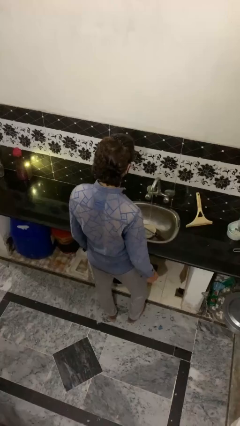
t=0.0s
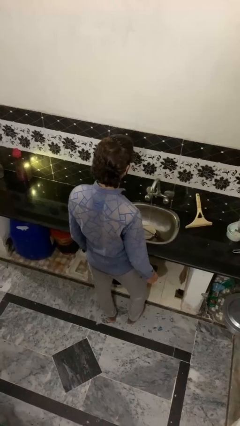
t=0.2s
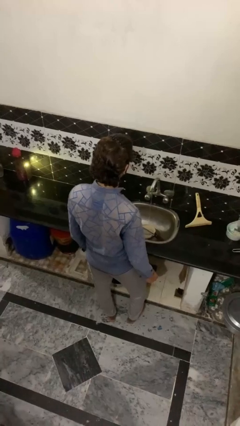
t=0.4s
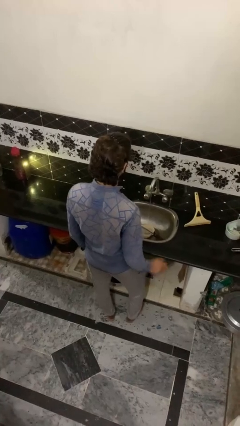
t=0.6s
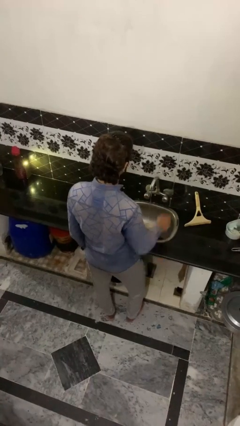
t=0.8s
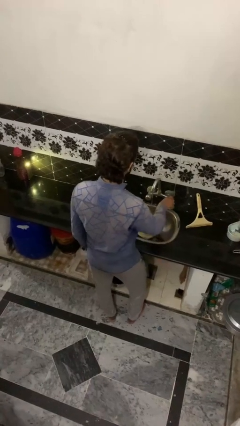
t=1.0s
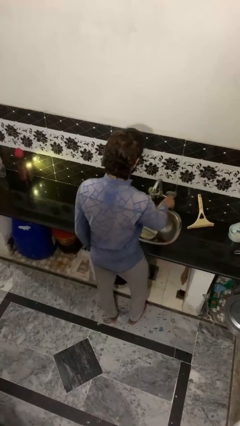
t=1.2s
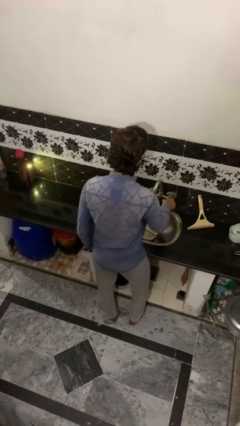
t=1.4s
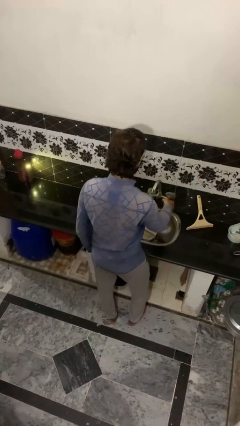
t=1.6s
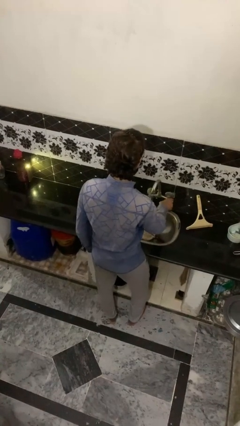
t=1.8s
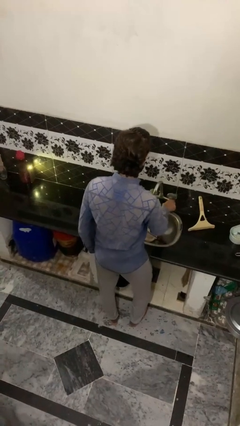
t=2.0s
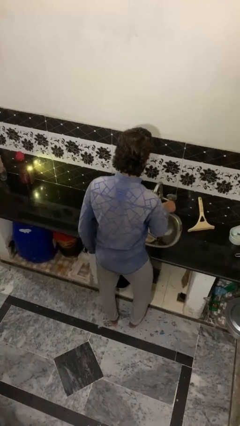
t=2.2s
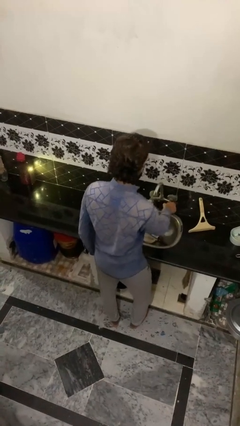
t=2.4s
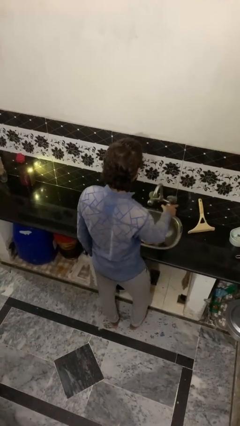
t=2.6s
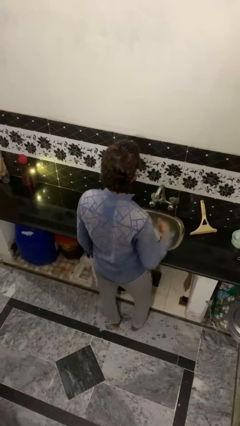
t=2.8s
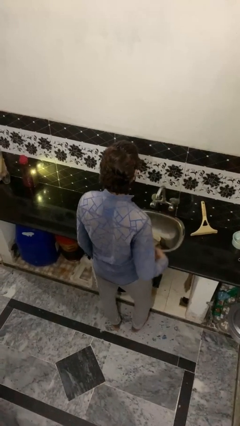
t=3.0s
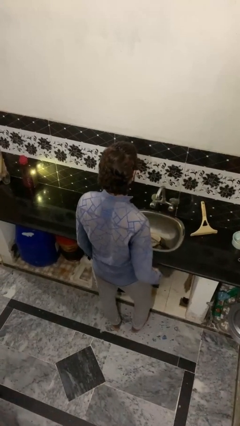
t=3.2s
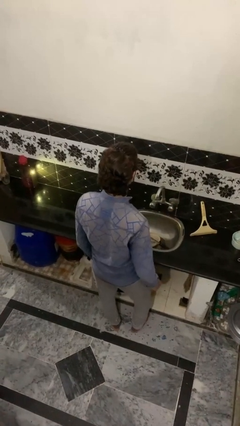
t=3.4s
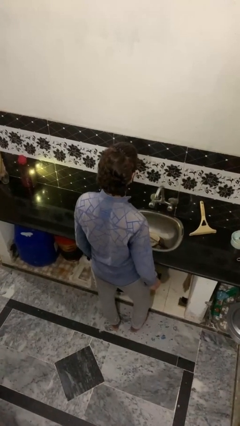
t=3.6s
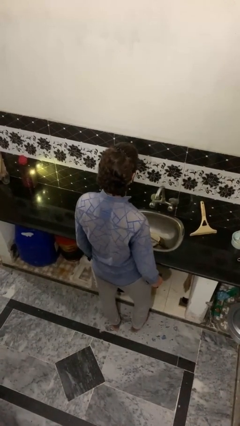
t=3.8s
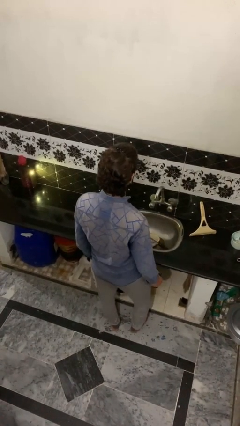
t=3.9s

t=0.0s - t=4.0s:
person turns off faucet

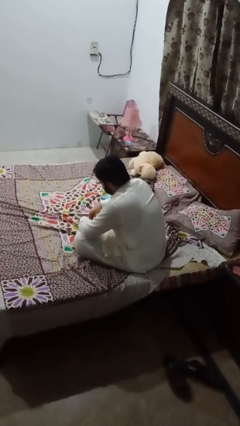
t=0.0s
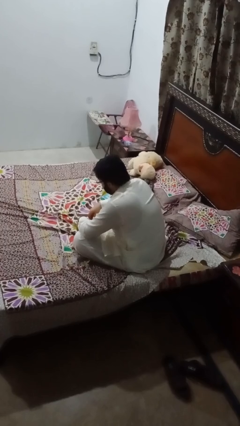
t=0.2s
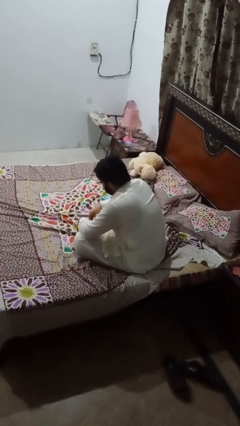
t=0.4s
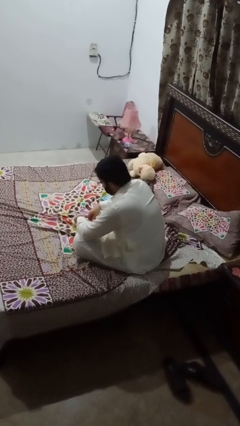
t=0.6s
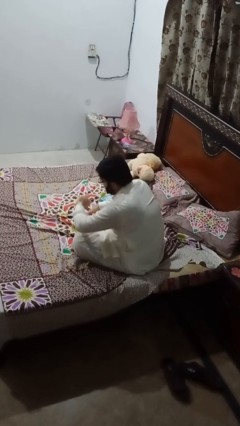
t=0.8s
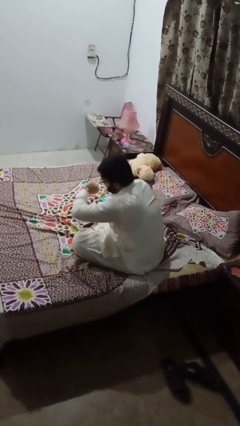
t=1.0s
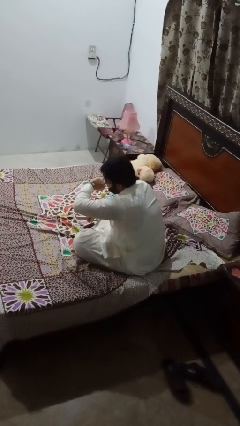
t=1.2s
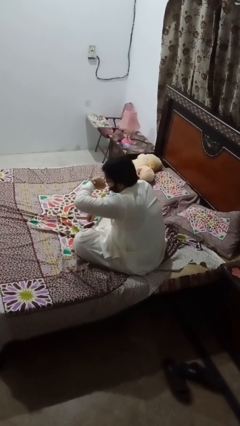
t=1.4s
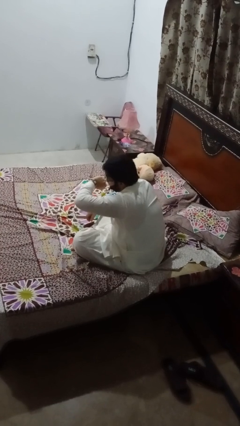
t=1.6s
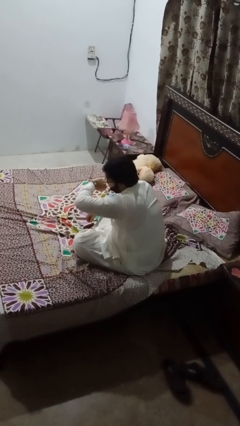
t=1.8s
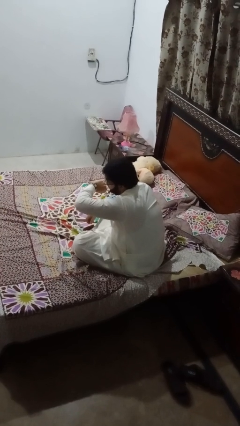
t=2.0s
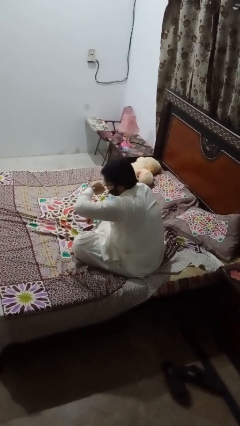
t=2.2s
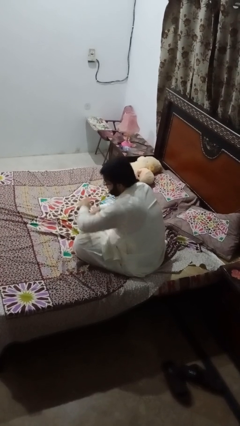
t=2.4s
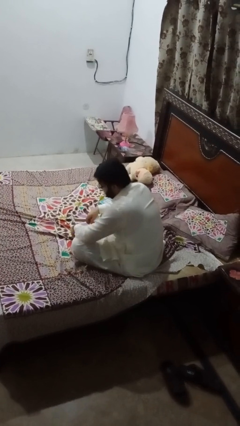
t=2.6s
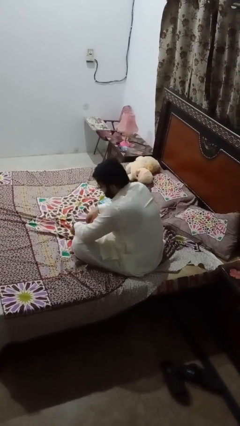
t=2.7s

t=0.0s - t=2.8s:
person looks at wristwatch

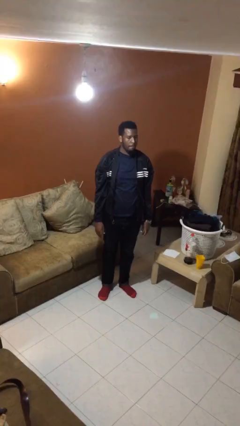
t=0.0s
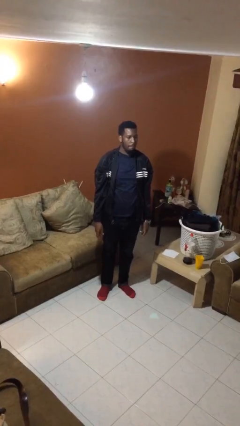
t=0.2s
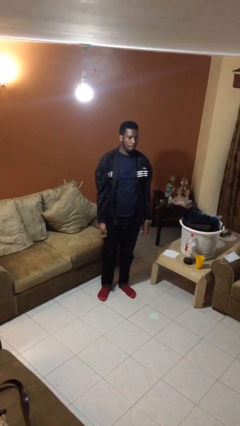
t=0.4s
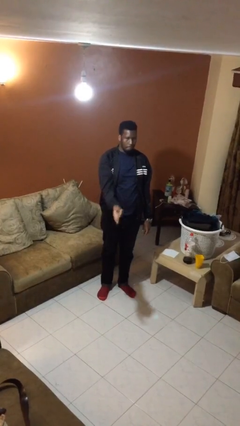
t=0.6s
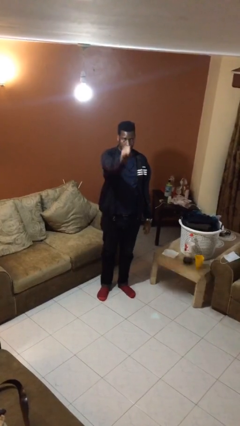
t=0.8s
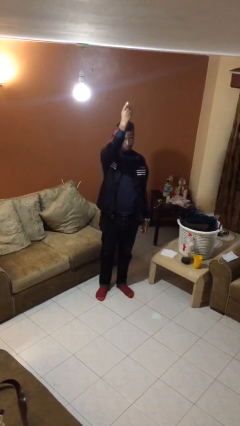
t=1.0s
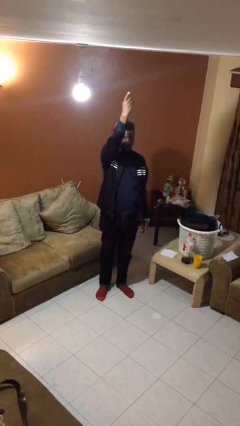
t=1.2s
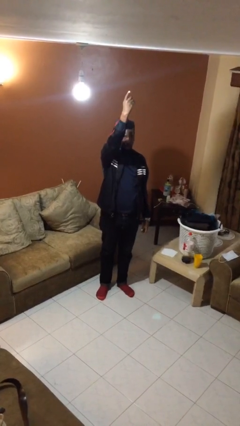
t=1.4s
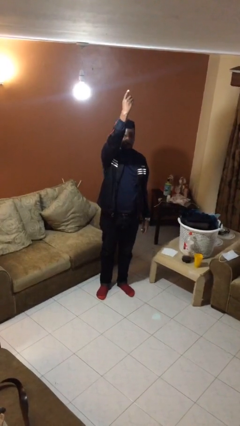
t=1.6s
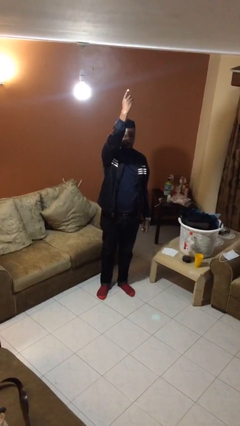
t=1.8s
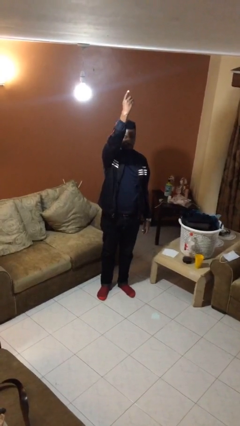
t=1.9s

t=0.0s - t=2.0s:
person gestures swipe up

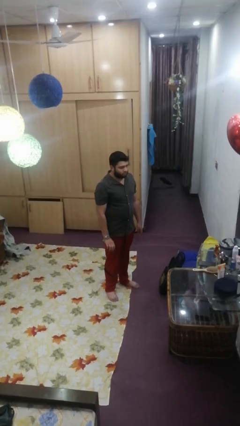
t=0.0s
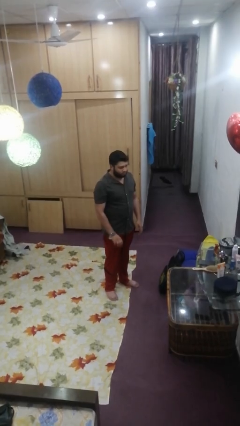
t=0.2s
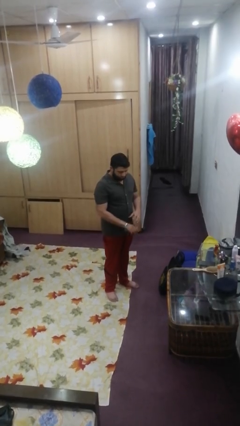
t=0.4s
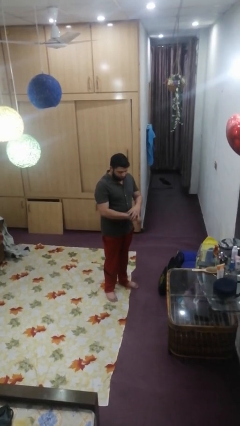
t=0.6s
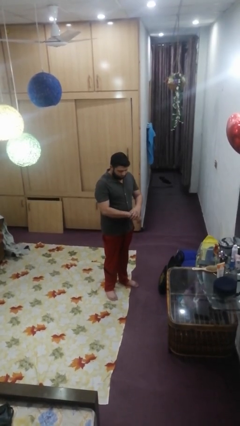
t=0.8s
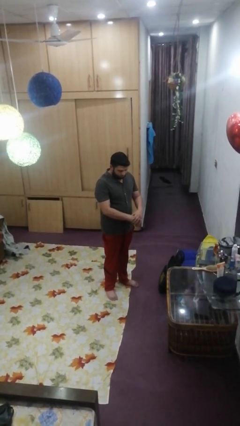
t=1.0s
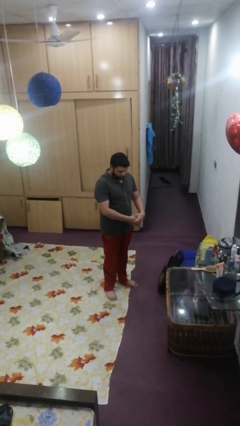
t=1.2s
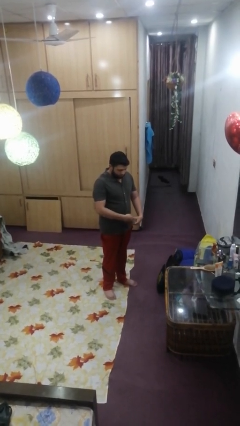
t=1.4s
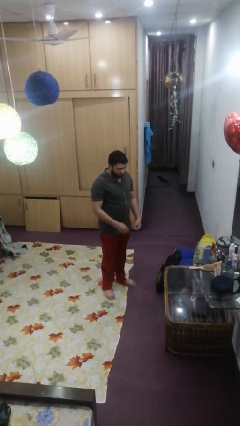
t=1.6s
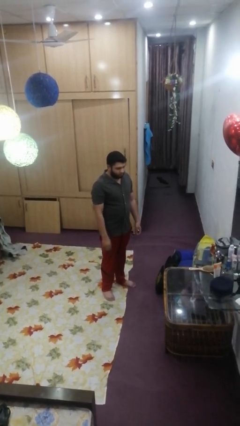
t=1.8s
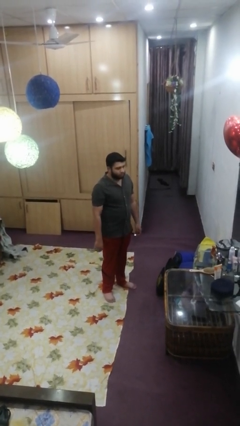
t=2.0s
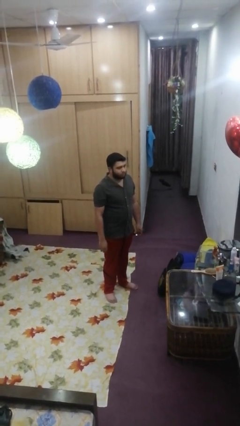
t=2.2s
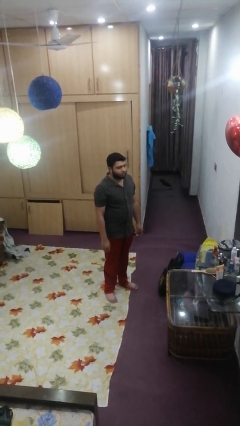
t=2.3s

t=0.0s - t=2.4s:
person takes off wristwatch

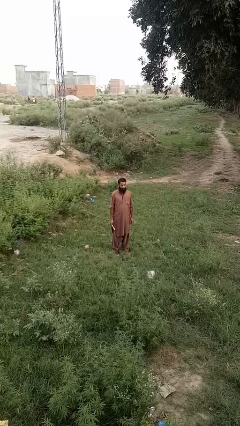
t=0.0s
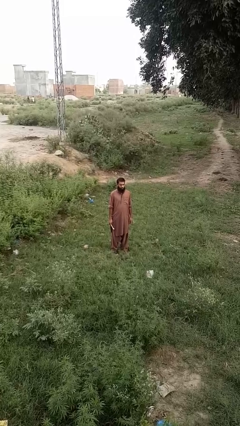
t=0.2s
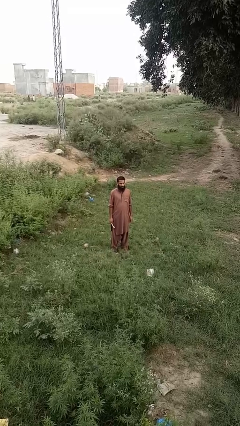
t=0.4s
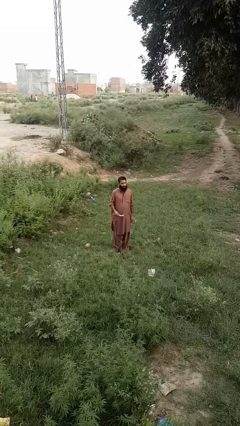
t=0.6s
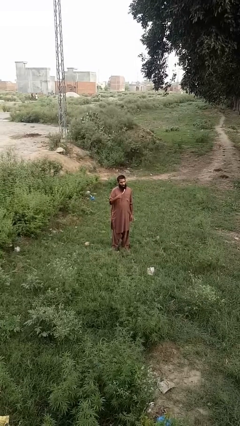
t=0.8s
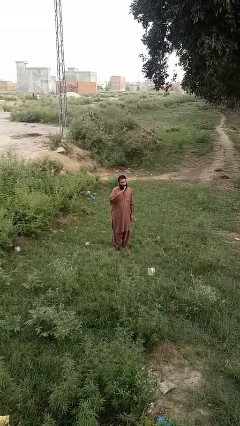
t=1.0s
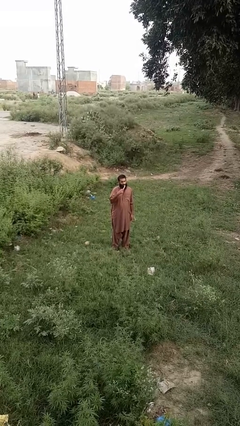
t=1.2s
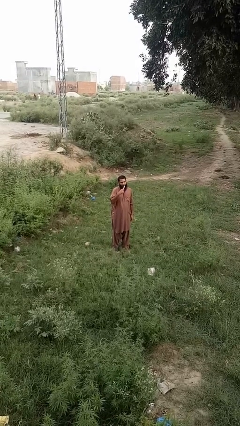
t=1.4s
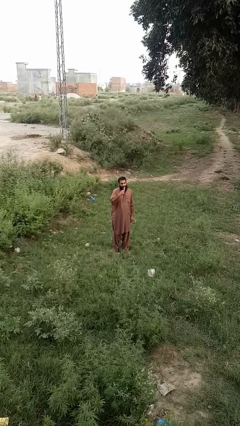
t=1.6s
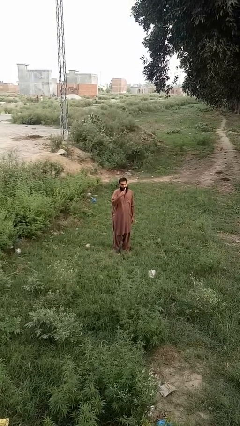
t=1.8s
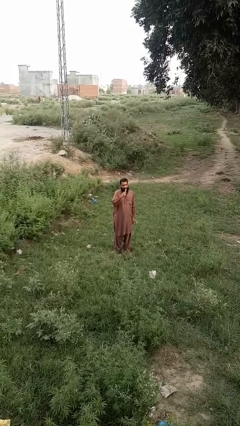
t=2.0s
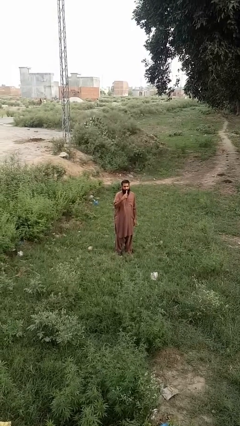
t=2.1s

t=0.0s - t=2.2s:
person brushes teeth

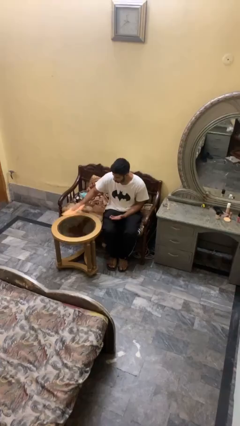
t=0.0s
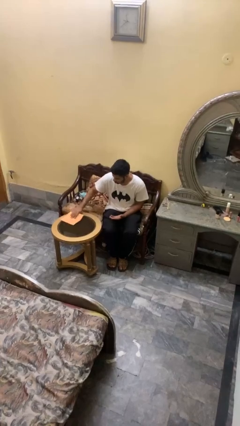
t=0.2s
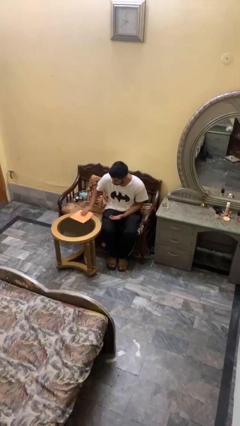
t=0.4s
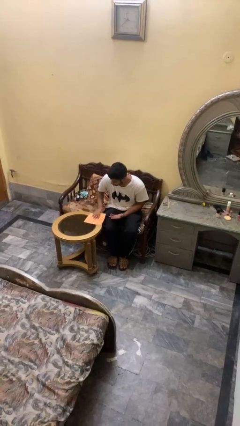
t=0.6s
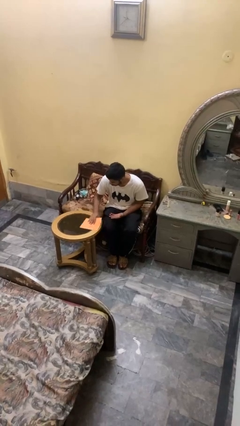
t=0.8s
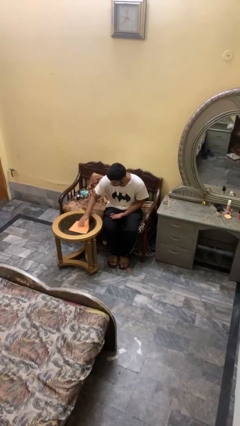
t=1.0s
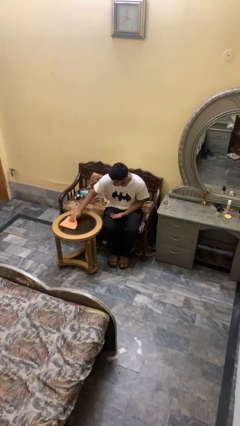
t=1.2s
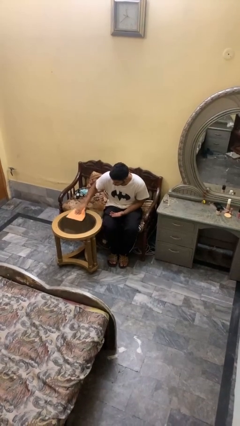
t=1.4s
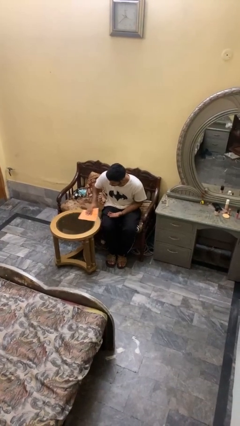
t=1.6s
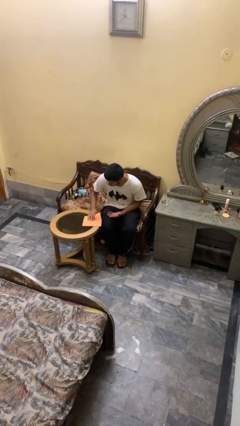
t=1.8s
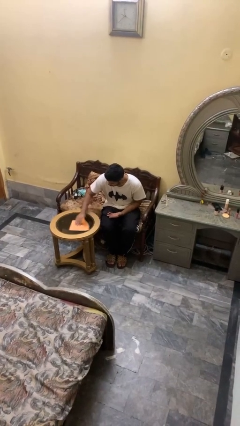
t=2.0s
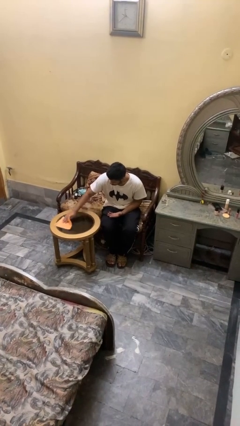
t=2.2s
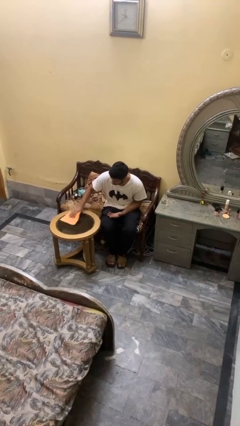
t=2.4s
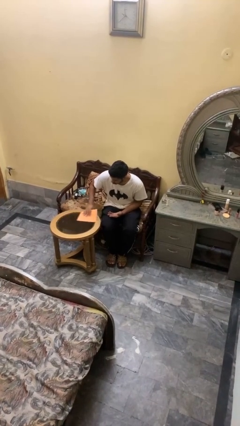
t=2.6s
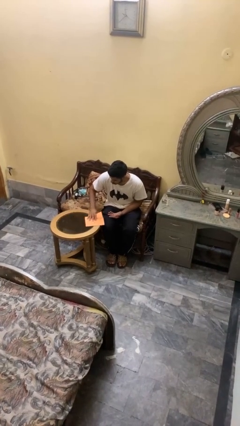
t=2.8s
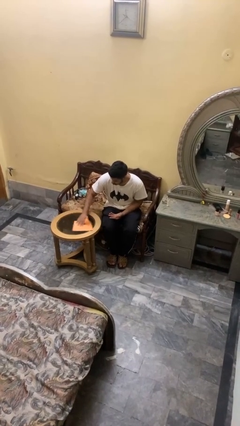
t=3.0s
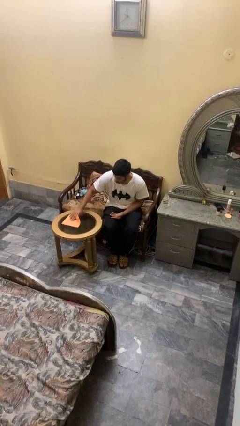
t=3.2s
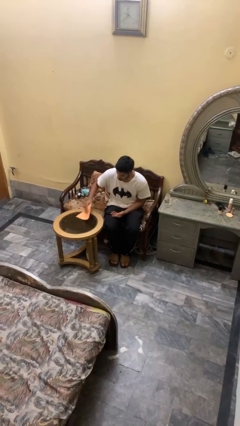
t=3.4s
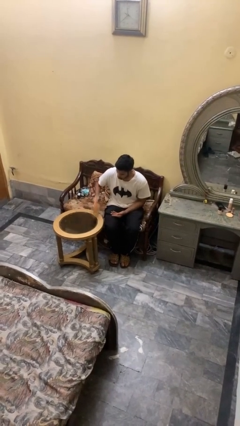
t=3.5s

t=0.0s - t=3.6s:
person cleans table with rag

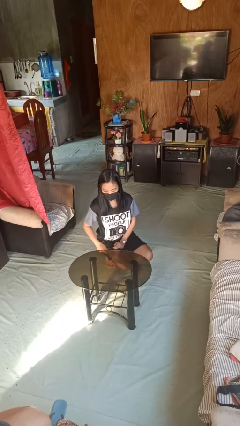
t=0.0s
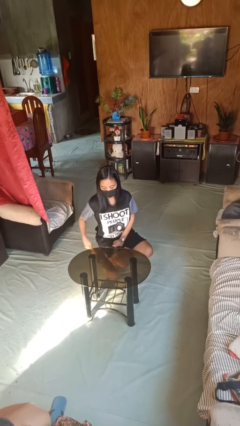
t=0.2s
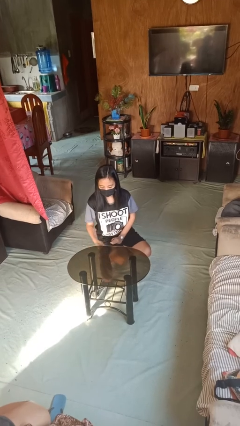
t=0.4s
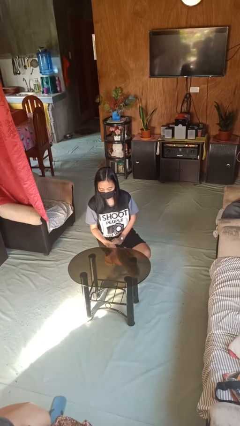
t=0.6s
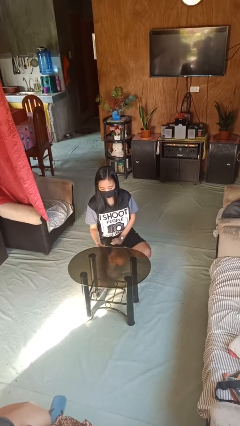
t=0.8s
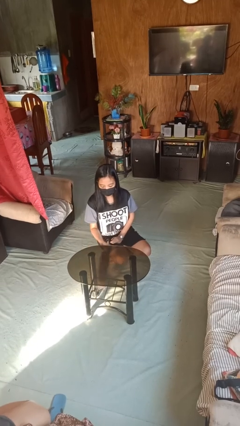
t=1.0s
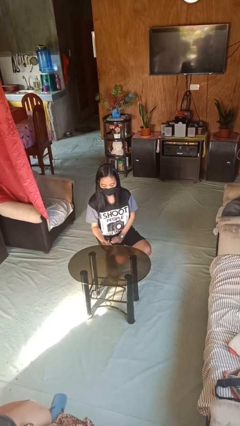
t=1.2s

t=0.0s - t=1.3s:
person dusts furniture
